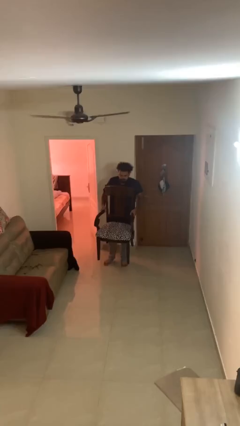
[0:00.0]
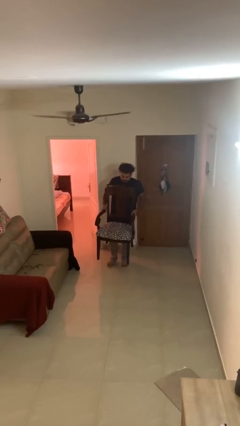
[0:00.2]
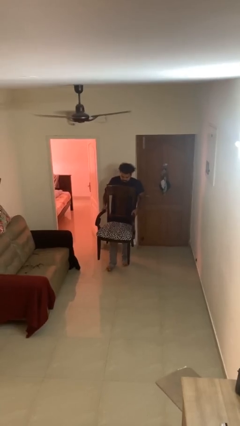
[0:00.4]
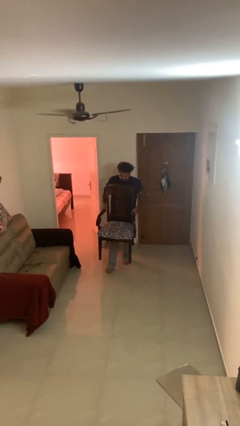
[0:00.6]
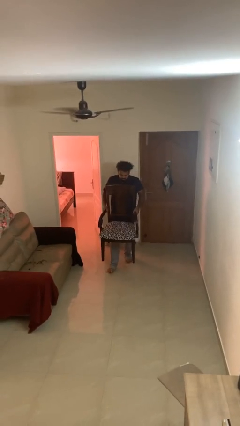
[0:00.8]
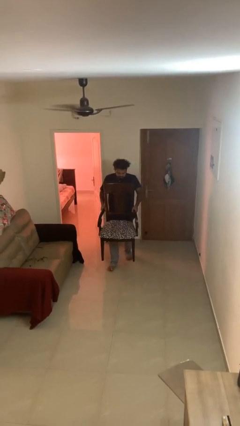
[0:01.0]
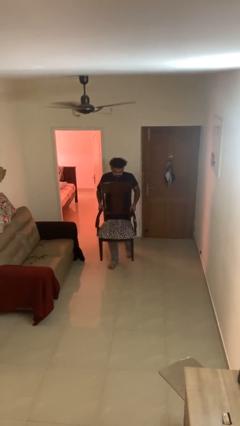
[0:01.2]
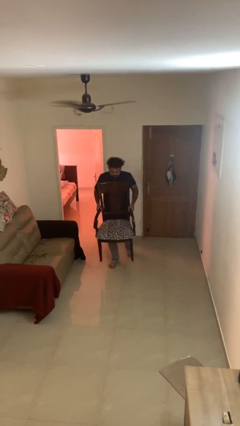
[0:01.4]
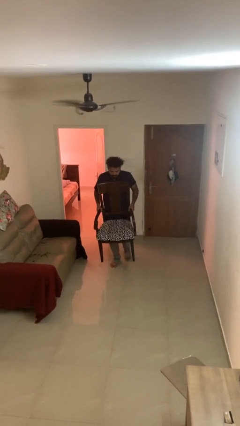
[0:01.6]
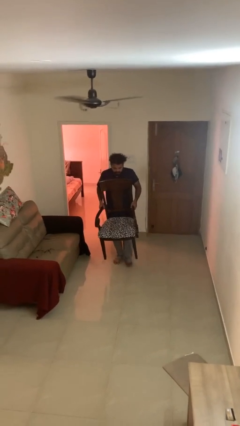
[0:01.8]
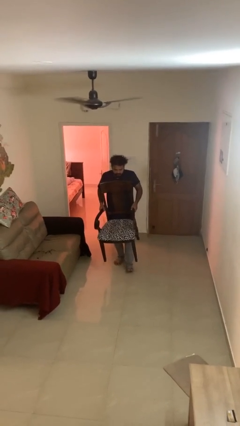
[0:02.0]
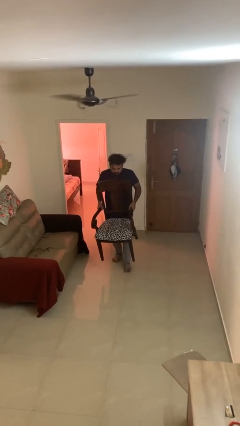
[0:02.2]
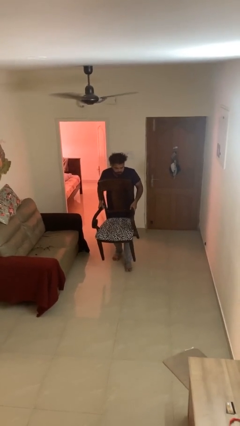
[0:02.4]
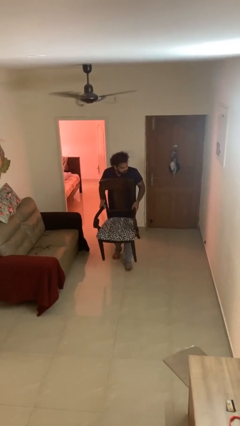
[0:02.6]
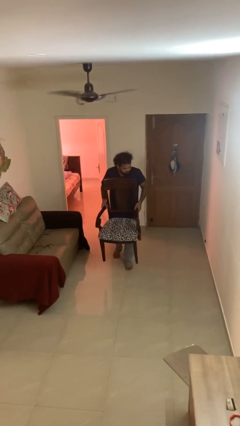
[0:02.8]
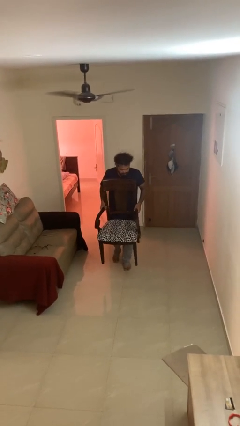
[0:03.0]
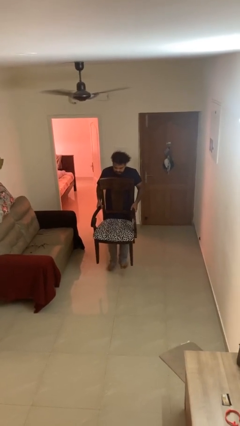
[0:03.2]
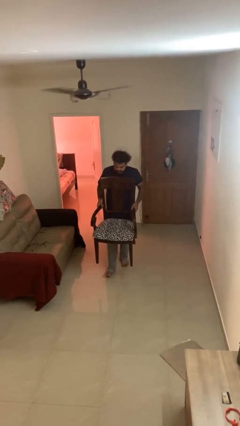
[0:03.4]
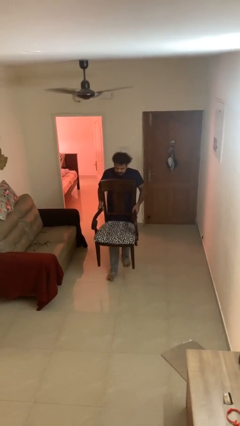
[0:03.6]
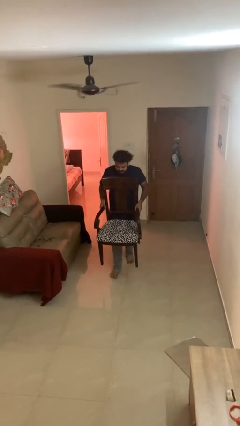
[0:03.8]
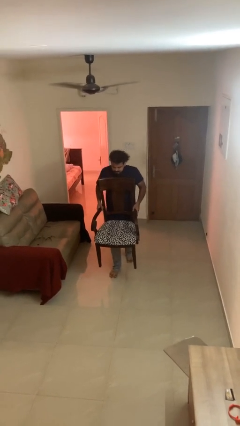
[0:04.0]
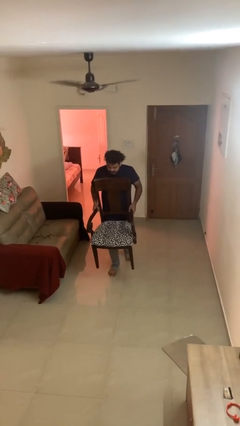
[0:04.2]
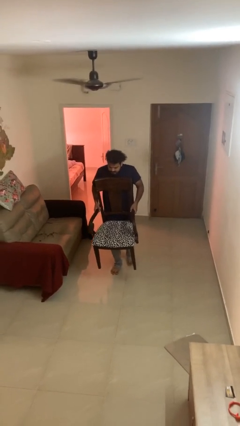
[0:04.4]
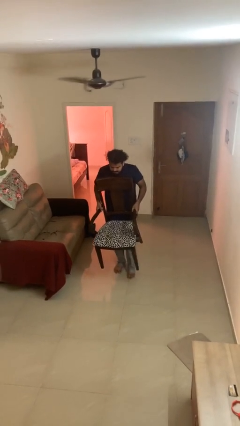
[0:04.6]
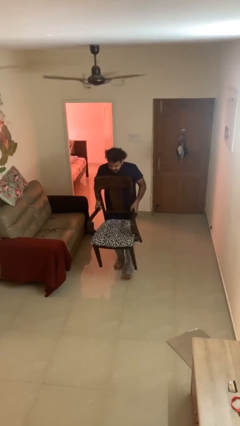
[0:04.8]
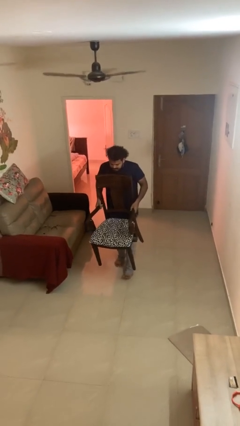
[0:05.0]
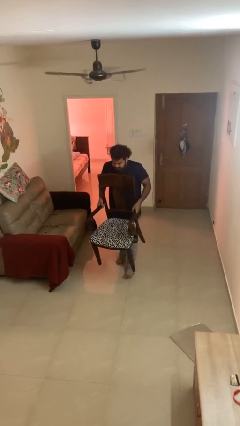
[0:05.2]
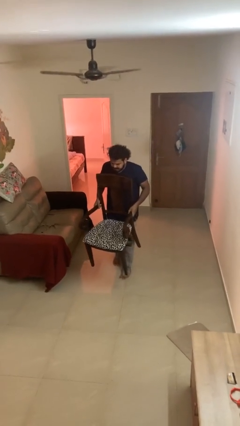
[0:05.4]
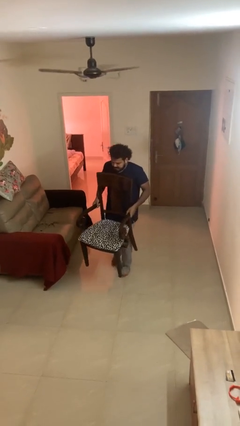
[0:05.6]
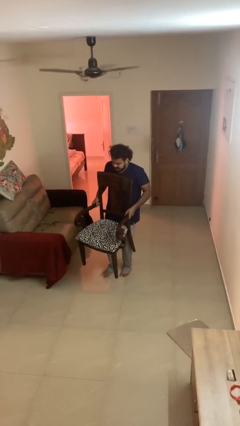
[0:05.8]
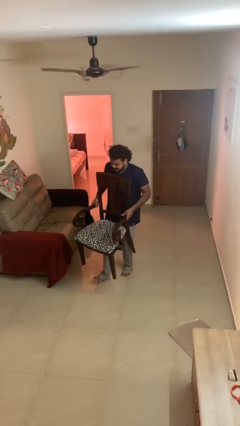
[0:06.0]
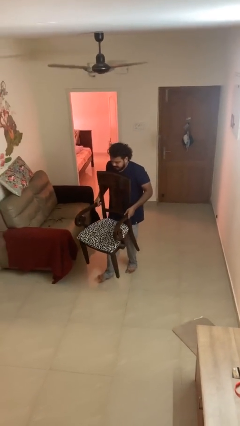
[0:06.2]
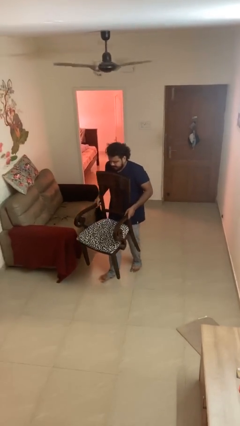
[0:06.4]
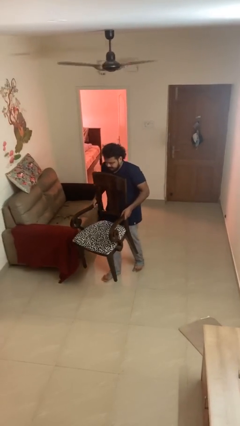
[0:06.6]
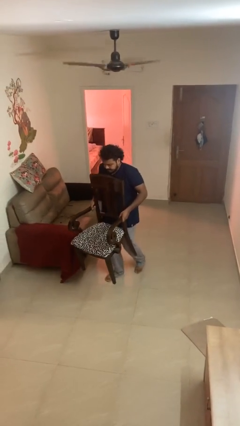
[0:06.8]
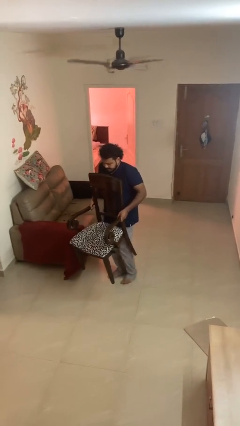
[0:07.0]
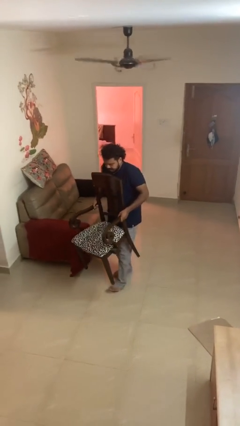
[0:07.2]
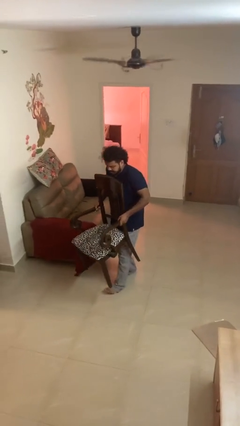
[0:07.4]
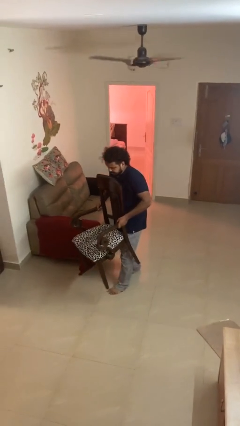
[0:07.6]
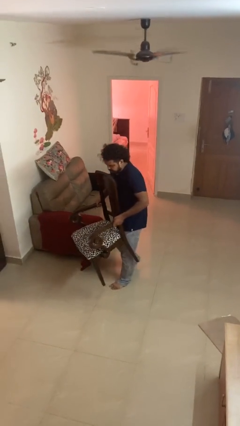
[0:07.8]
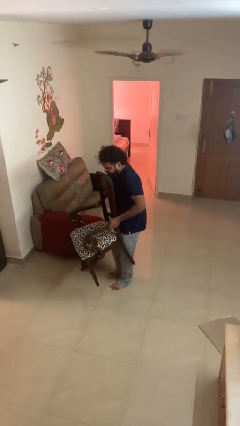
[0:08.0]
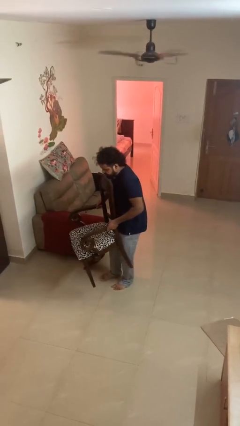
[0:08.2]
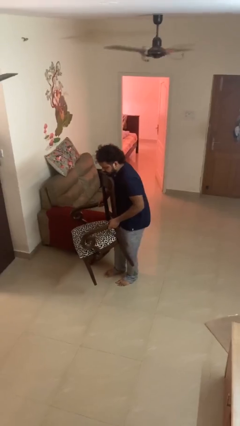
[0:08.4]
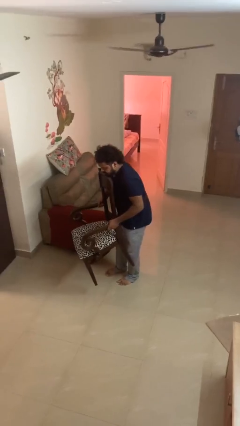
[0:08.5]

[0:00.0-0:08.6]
person carries heavy object

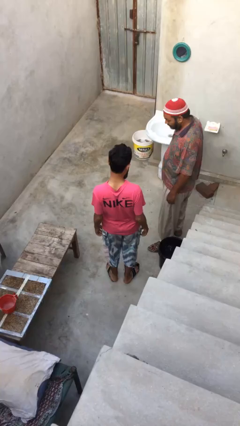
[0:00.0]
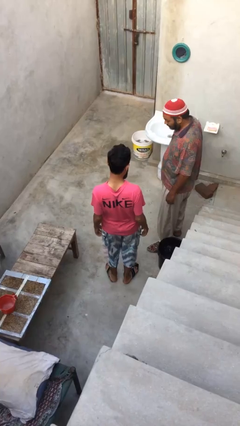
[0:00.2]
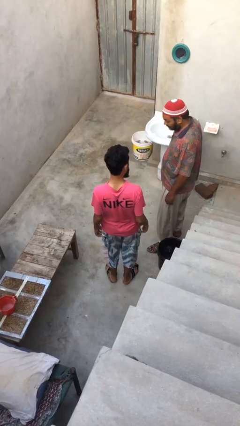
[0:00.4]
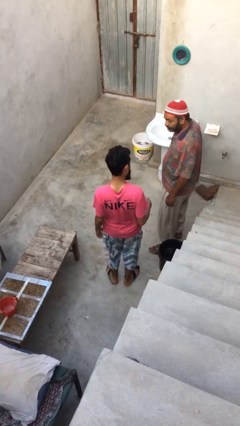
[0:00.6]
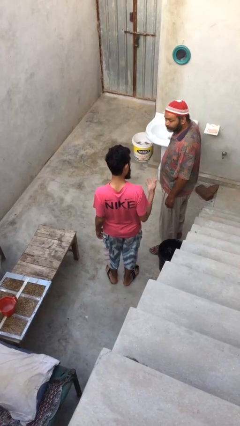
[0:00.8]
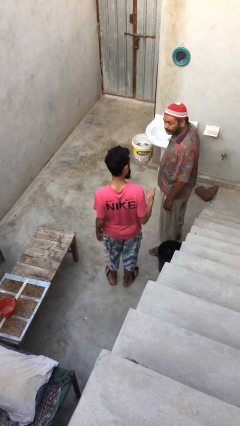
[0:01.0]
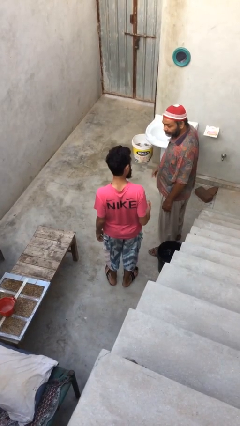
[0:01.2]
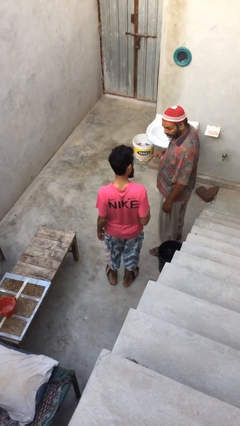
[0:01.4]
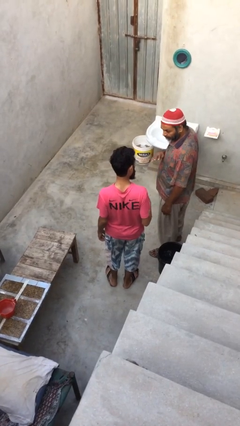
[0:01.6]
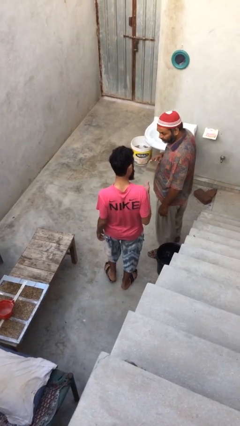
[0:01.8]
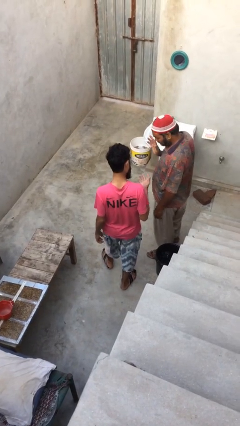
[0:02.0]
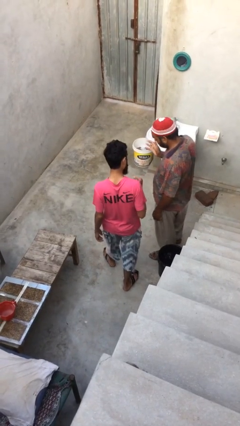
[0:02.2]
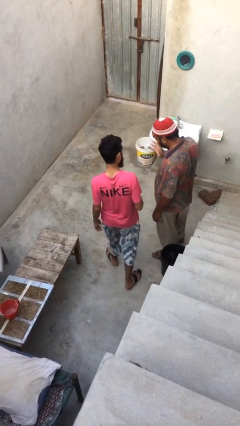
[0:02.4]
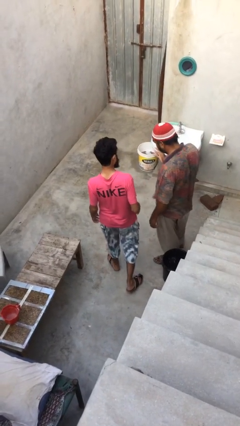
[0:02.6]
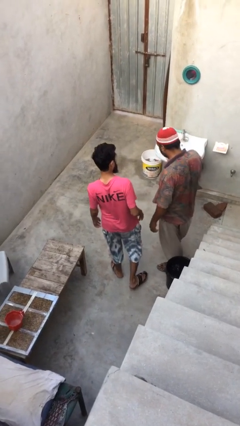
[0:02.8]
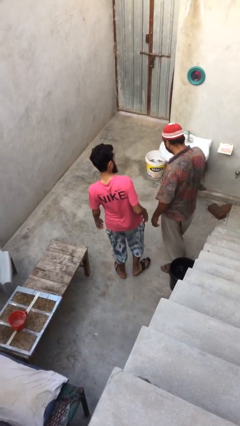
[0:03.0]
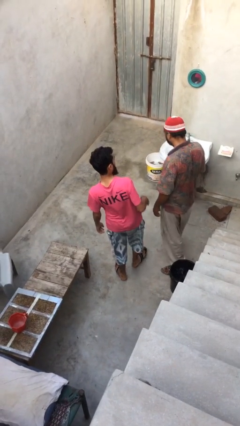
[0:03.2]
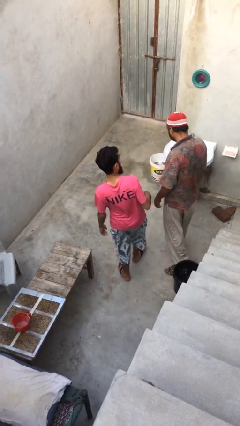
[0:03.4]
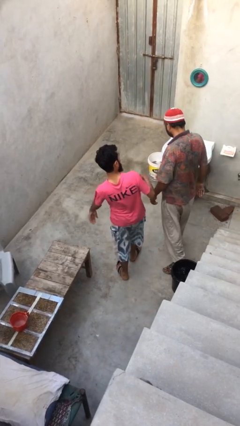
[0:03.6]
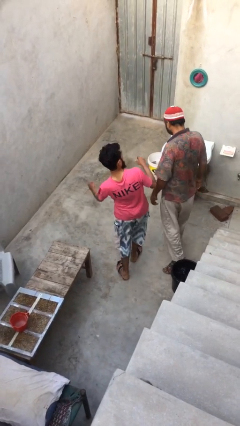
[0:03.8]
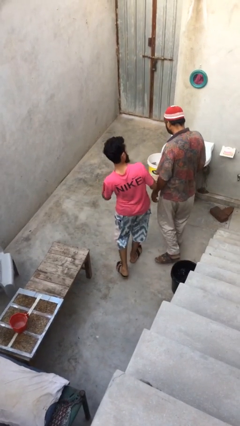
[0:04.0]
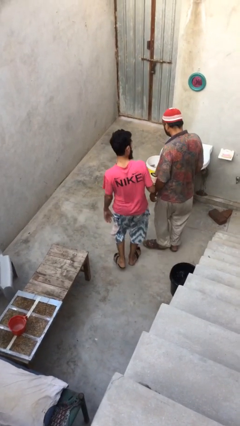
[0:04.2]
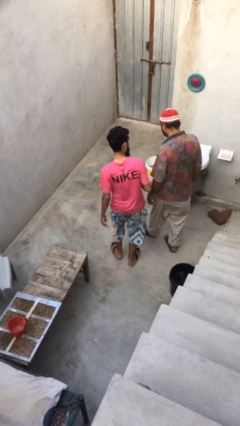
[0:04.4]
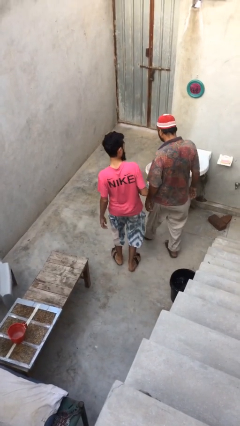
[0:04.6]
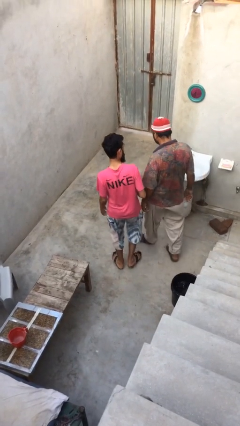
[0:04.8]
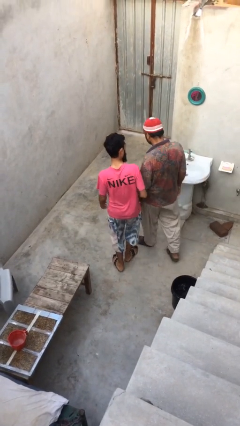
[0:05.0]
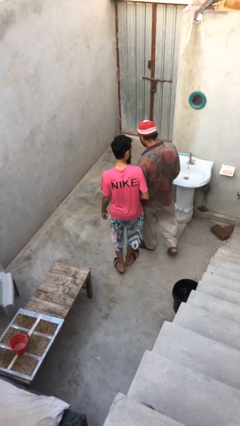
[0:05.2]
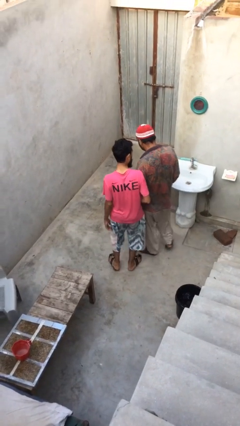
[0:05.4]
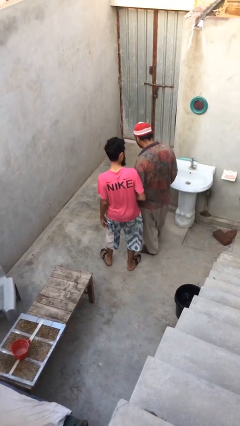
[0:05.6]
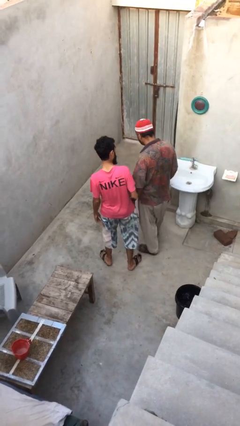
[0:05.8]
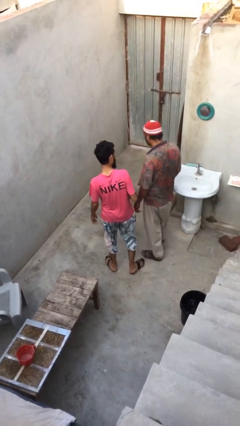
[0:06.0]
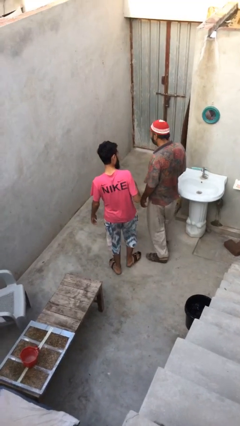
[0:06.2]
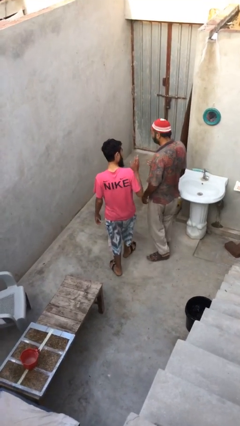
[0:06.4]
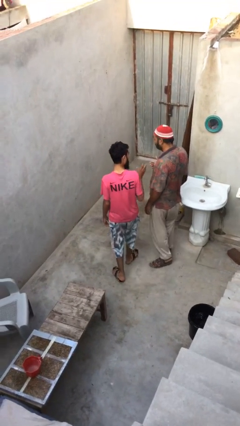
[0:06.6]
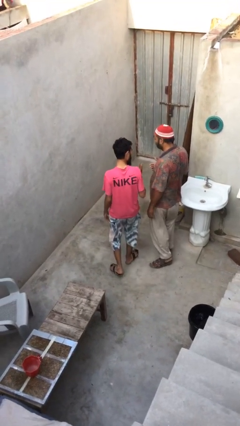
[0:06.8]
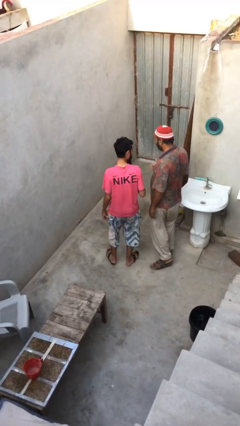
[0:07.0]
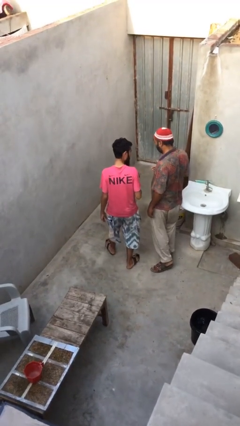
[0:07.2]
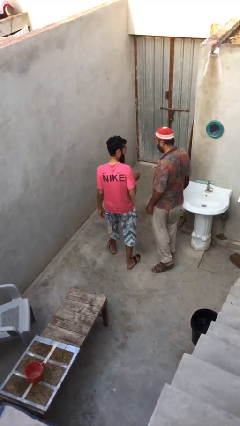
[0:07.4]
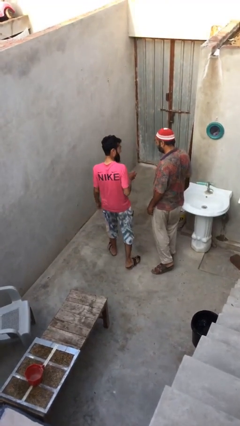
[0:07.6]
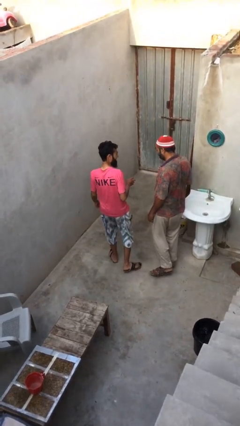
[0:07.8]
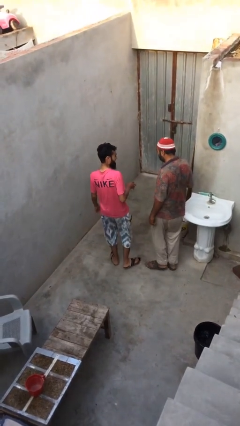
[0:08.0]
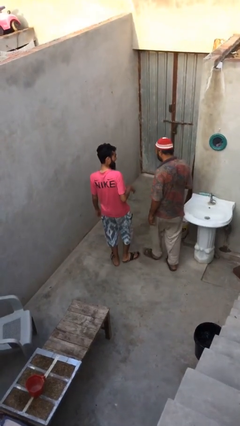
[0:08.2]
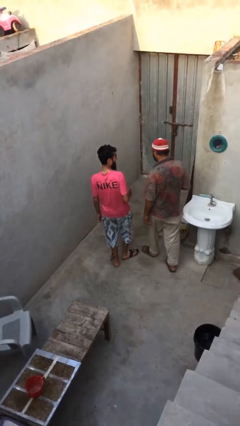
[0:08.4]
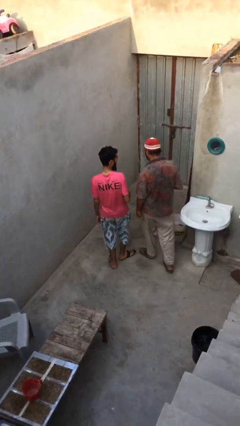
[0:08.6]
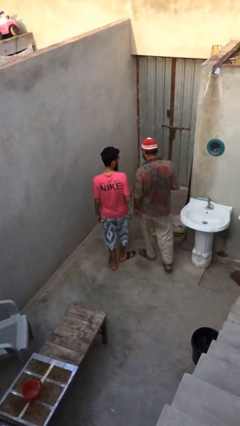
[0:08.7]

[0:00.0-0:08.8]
person talks to person

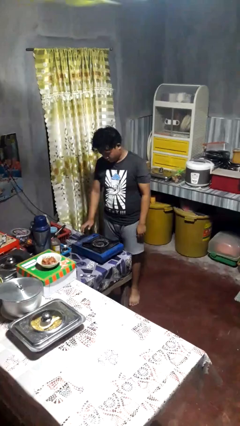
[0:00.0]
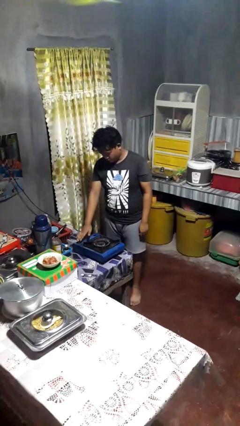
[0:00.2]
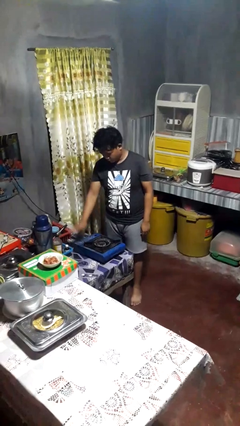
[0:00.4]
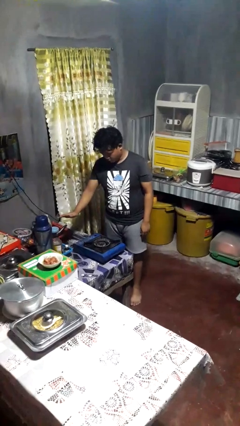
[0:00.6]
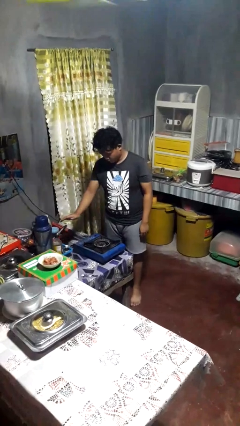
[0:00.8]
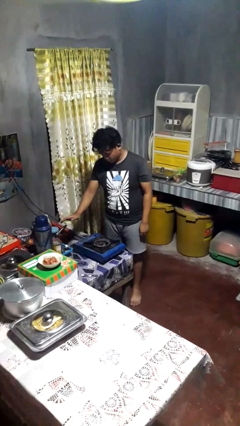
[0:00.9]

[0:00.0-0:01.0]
person burns hand
